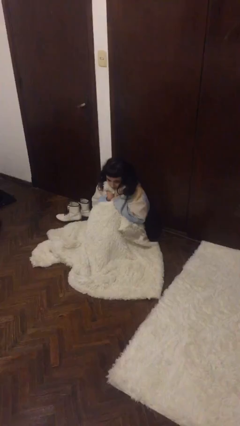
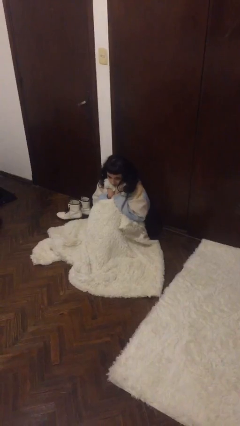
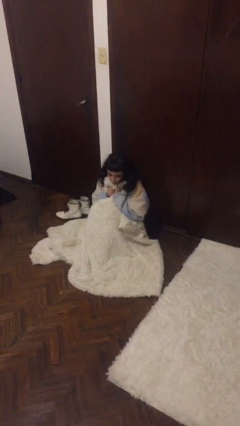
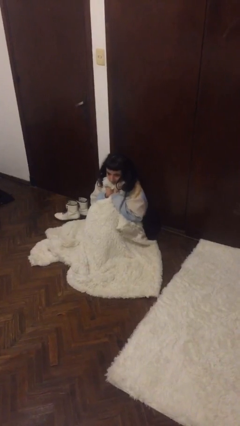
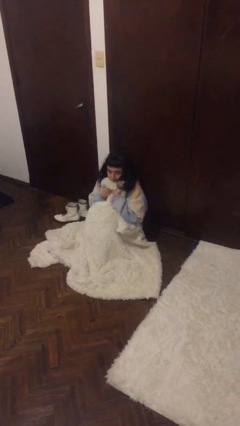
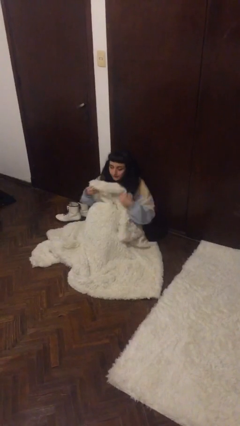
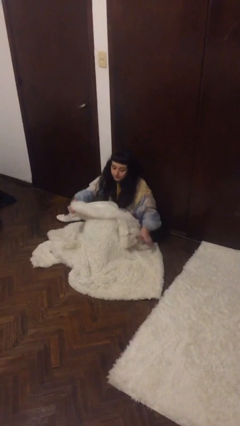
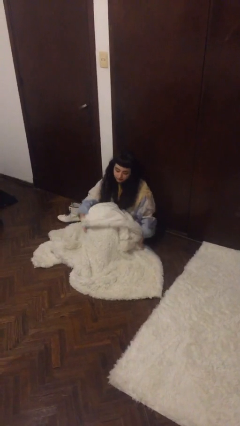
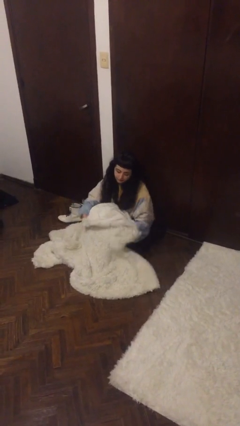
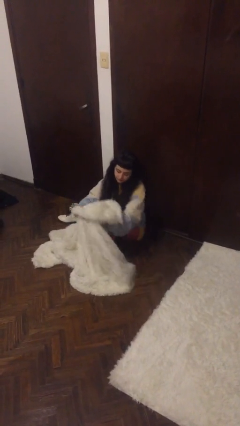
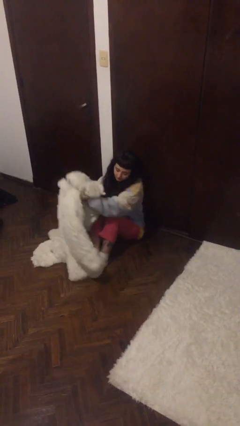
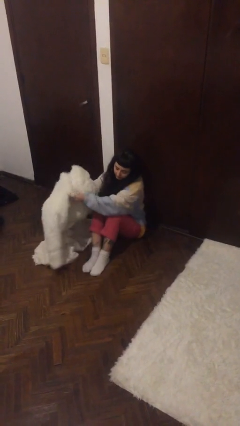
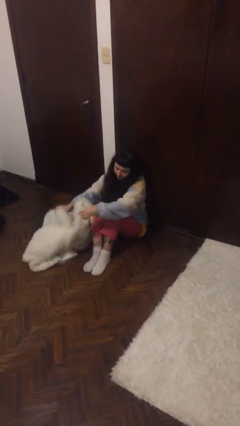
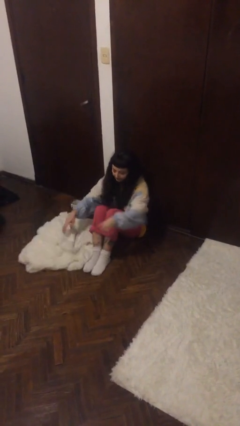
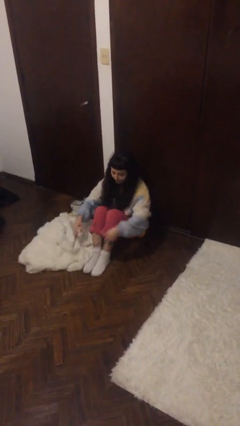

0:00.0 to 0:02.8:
person uncovers with blanket

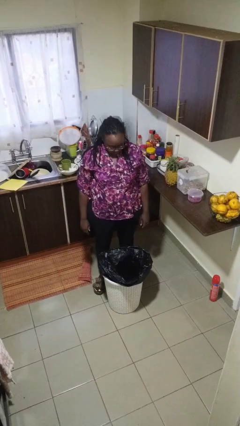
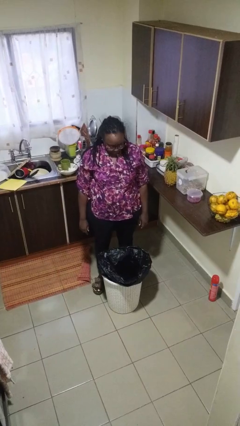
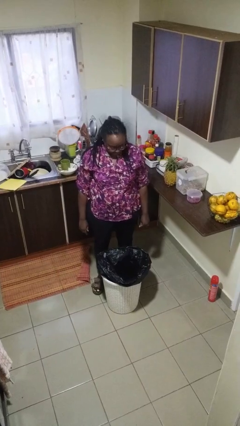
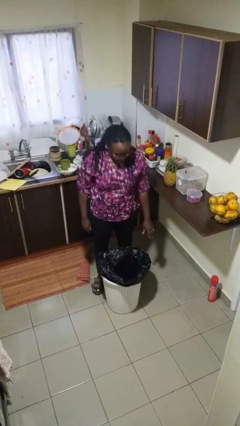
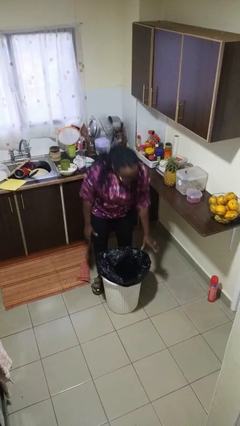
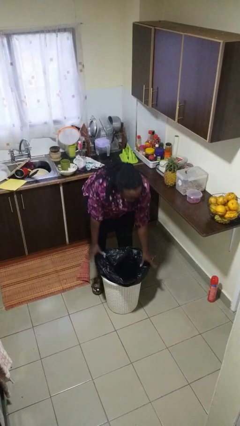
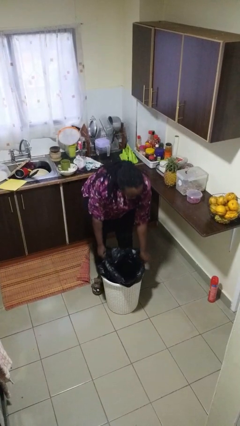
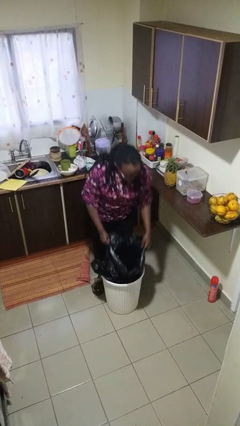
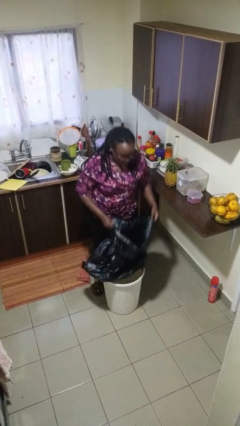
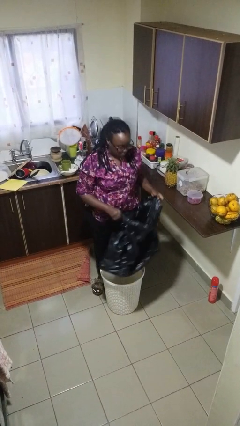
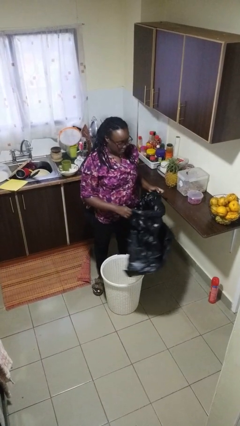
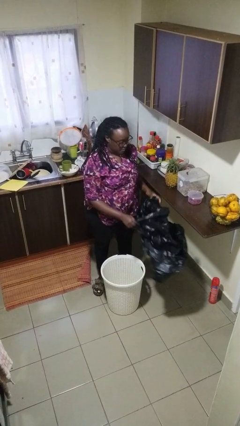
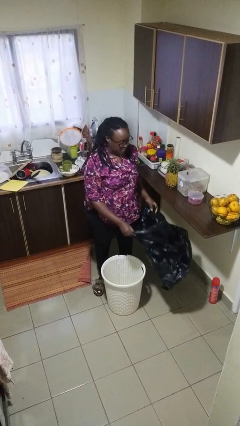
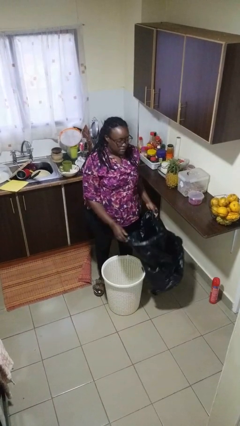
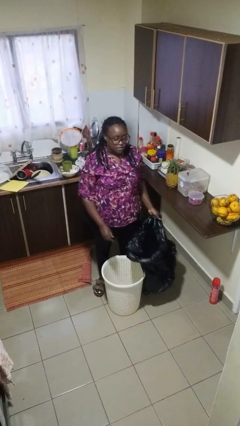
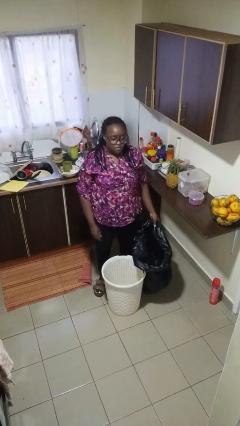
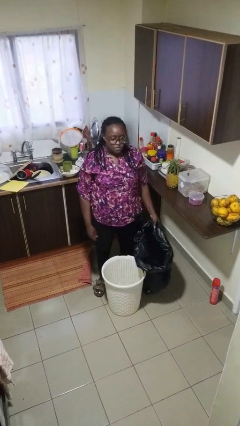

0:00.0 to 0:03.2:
person inserts trashbag into trashcan

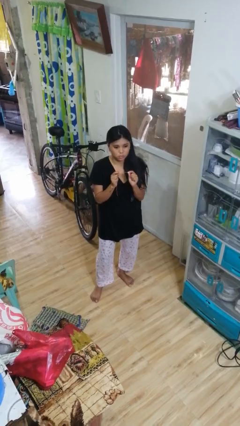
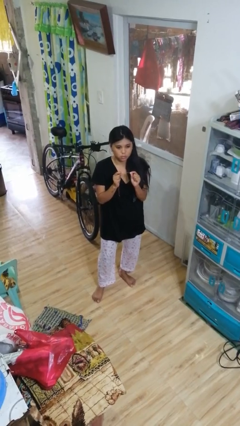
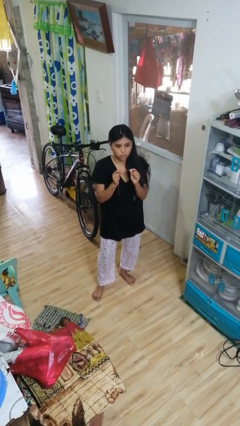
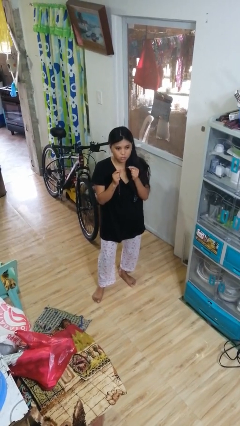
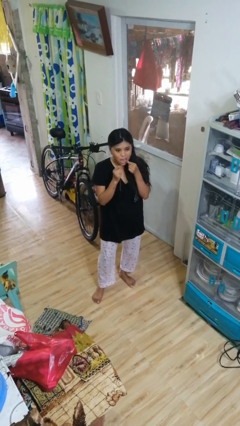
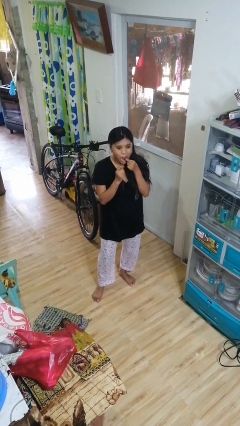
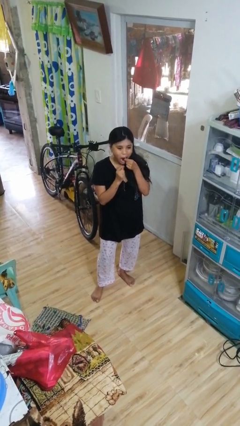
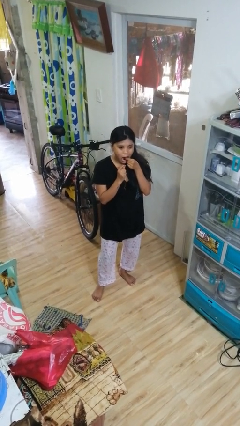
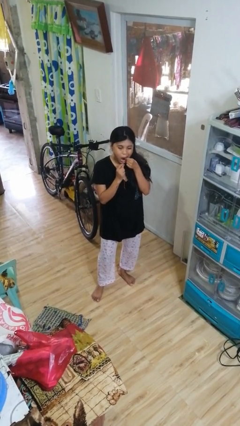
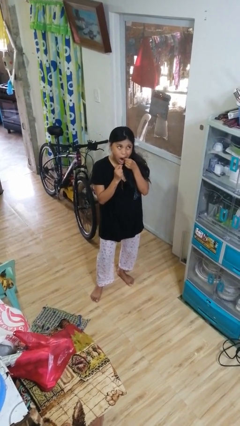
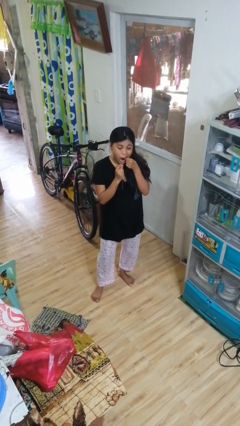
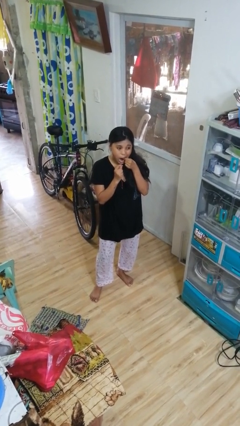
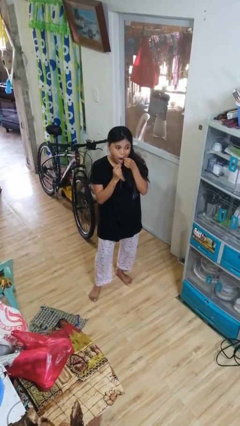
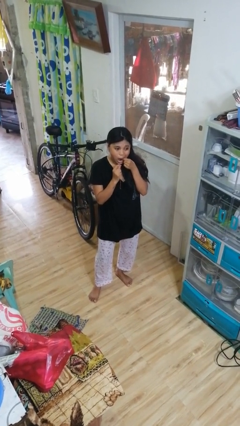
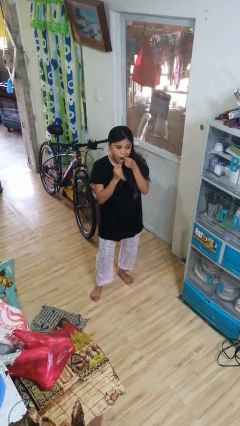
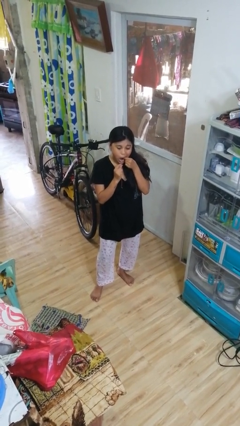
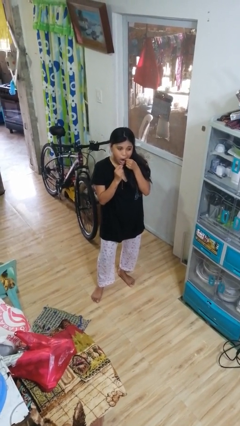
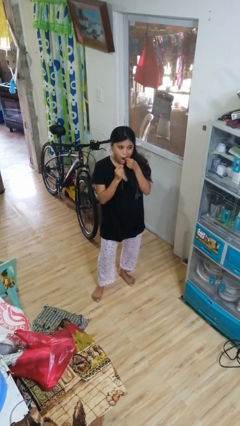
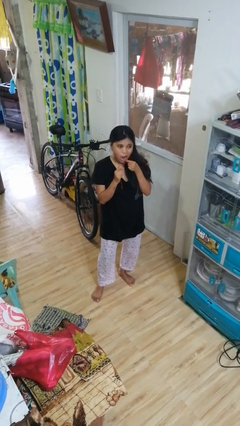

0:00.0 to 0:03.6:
person flosses

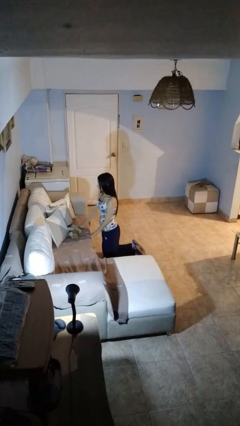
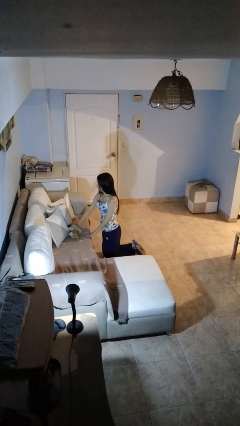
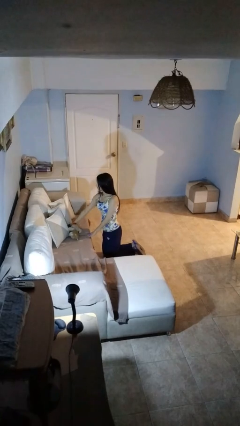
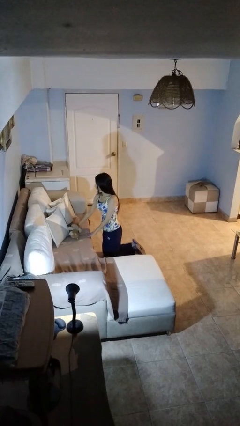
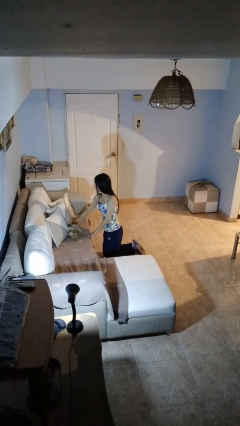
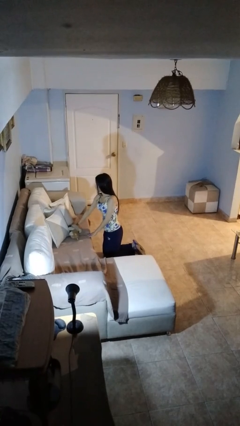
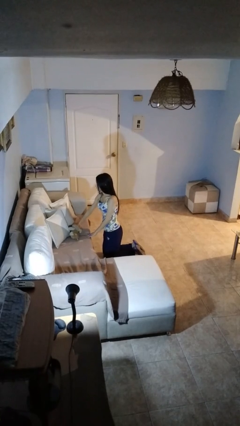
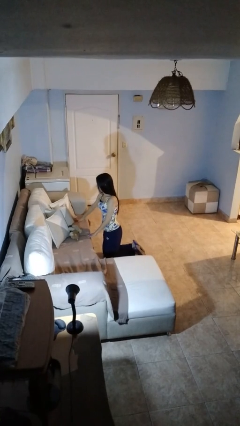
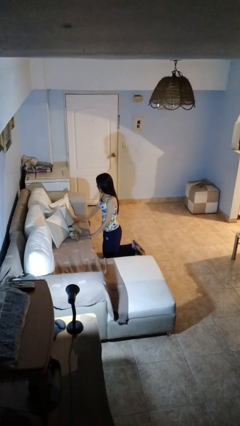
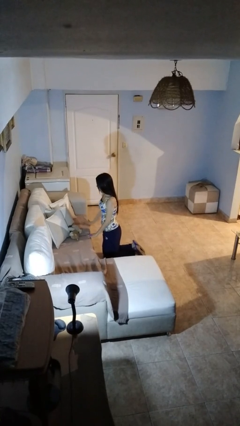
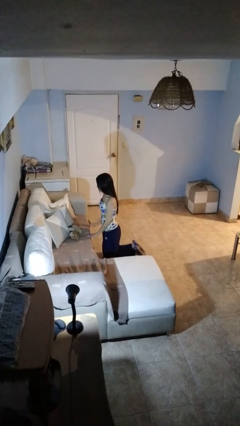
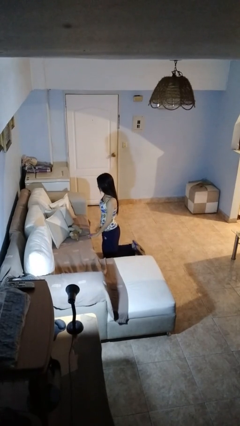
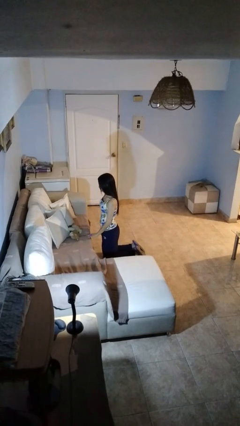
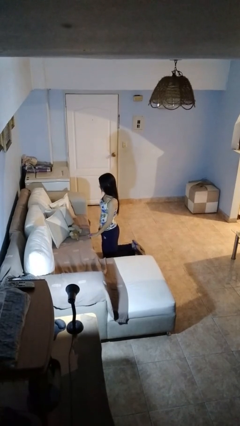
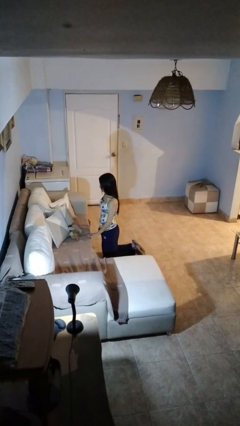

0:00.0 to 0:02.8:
person searches in couch

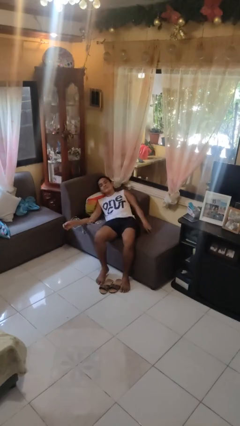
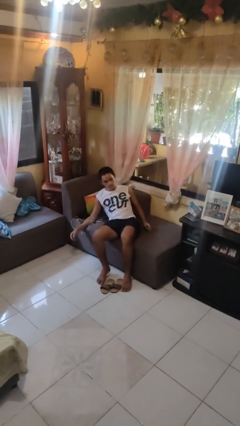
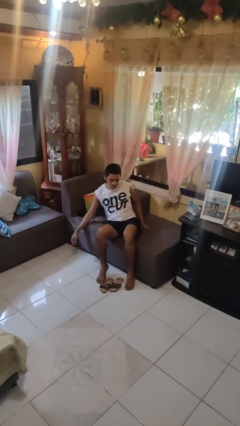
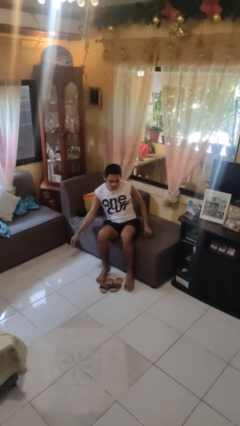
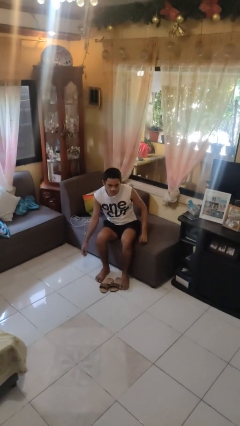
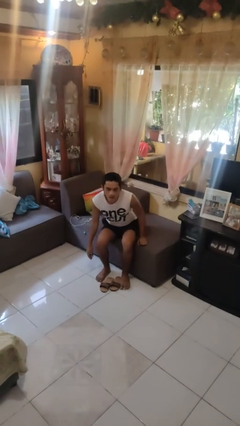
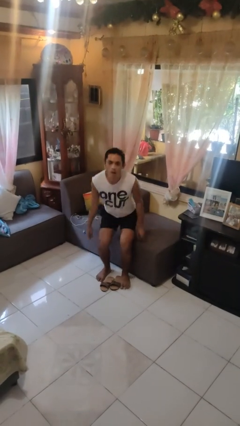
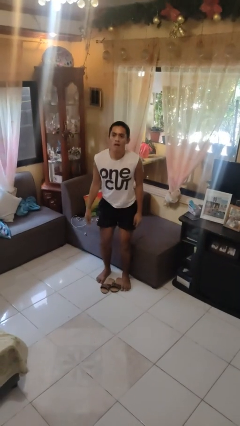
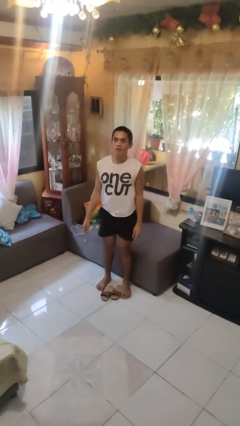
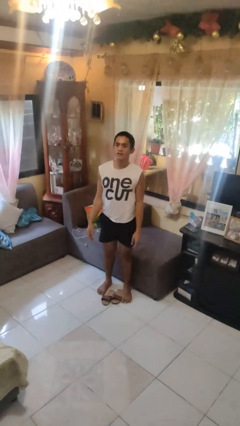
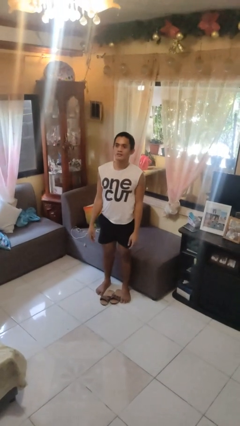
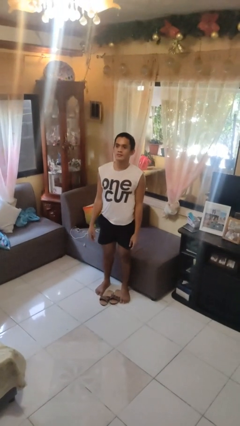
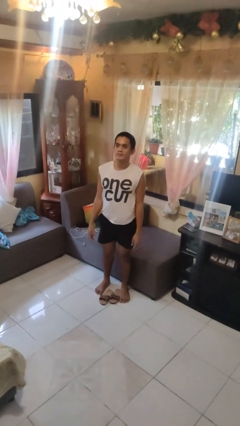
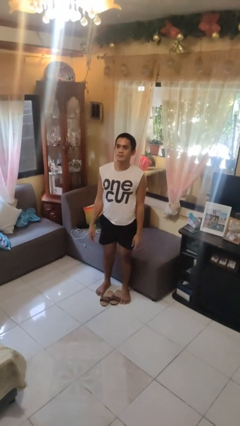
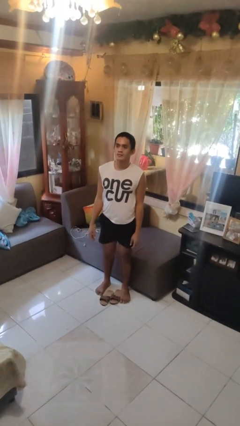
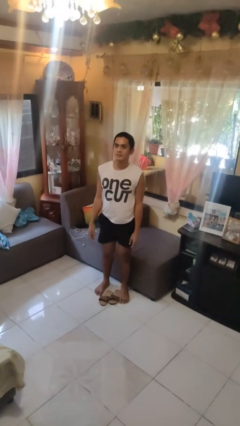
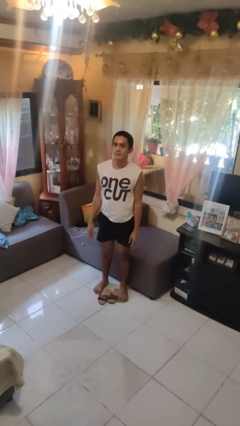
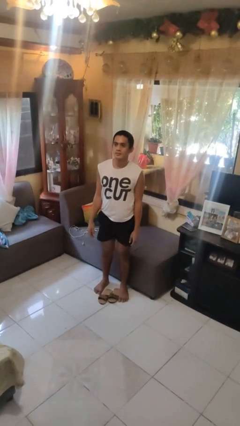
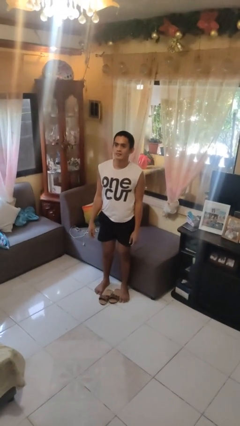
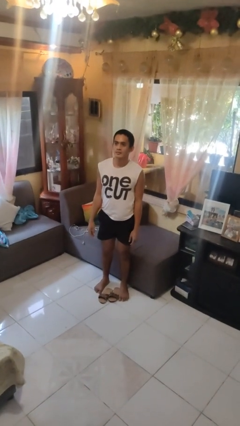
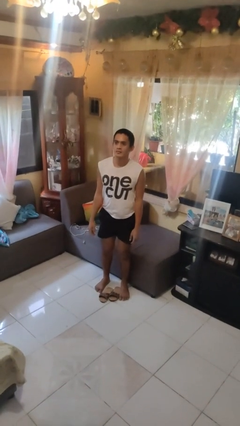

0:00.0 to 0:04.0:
person stands up

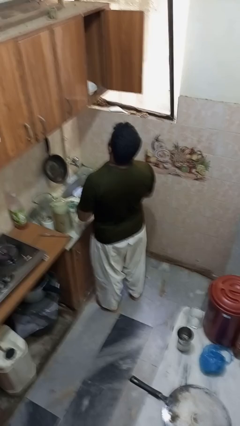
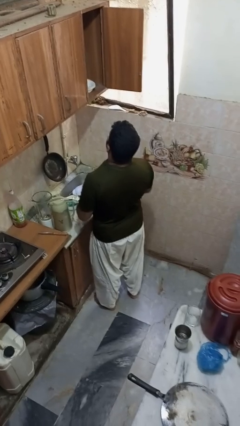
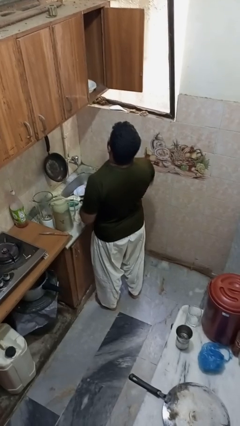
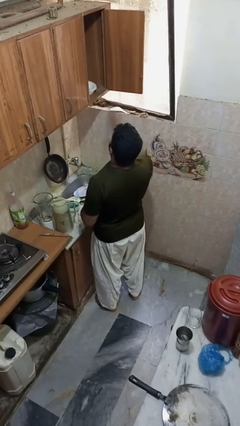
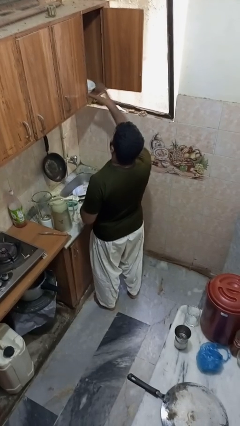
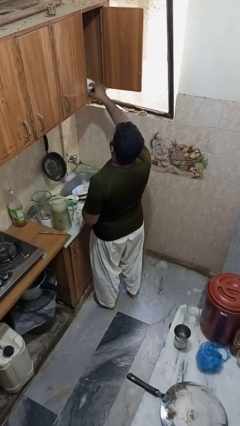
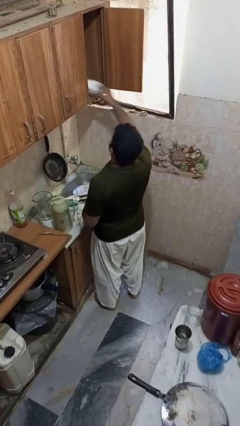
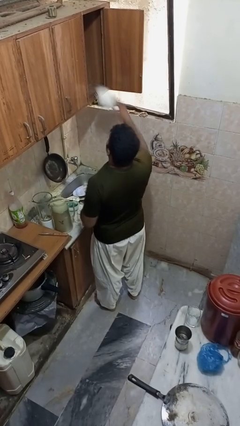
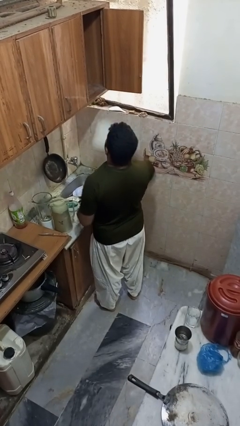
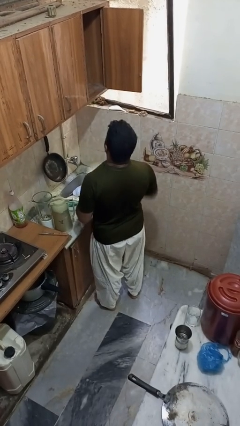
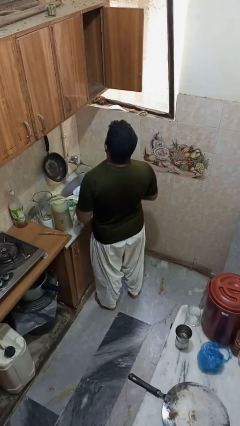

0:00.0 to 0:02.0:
person takes object from cabinet
